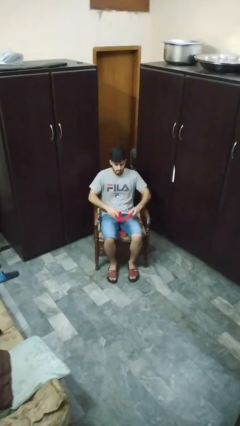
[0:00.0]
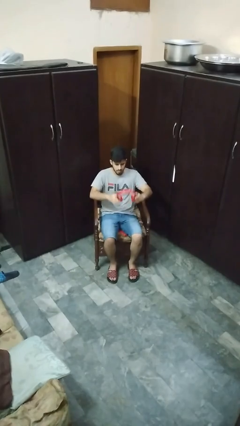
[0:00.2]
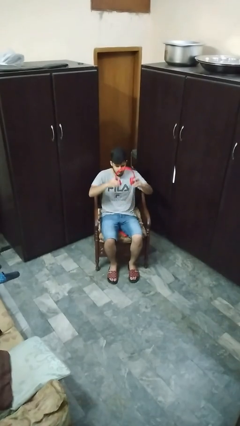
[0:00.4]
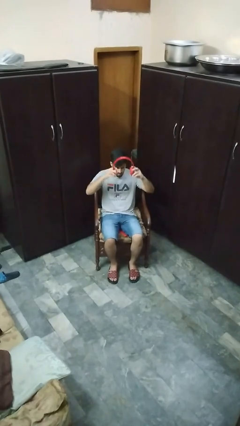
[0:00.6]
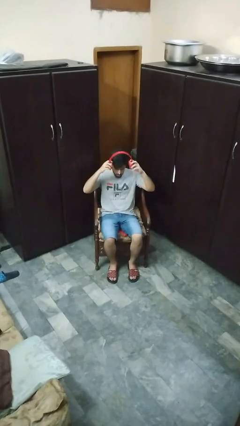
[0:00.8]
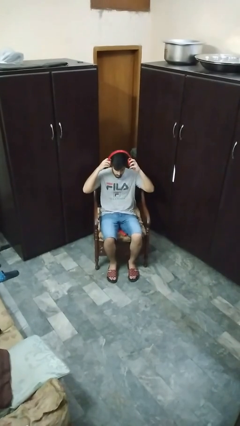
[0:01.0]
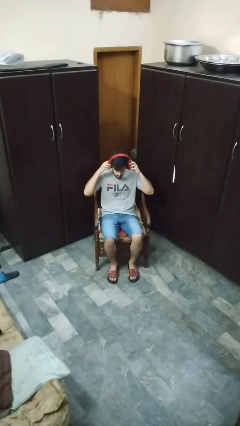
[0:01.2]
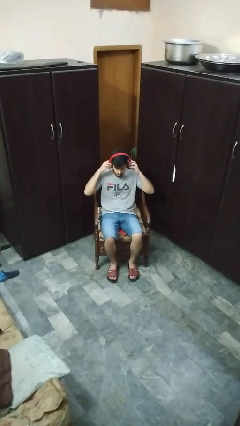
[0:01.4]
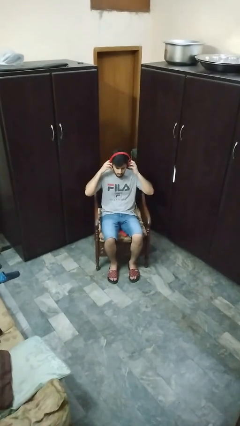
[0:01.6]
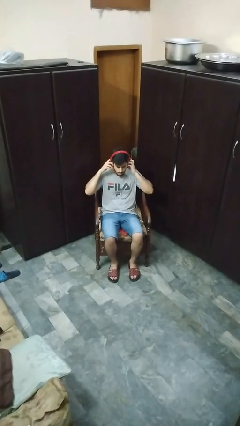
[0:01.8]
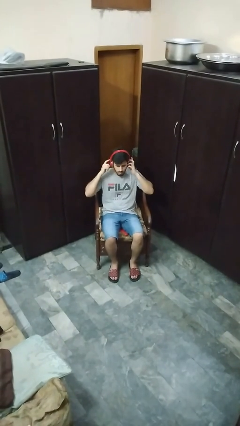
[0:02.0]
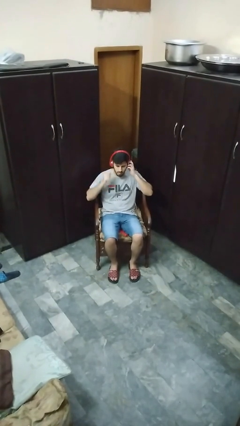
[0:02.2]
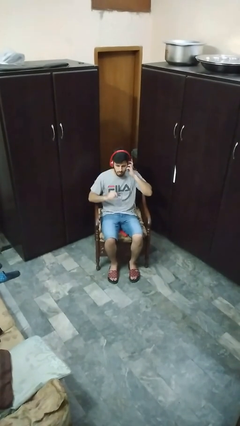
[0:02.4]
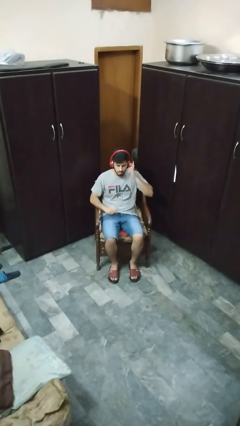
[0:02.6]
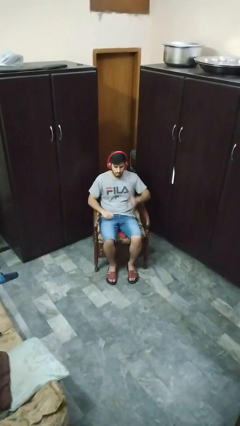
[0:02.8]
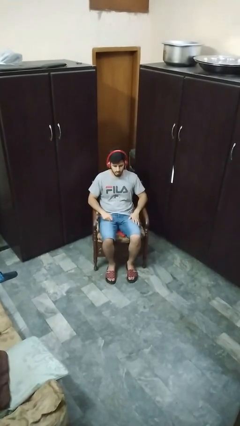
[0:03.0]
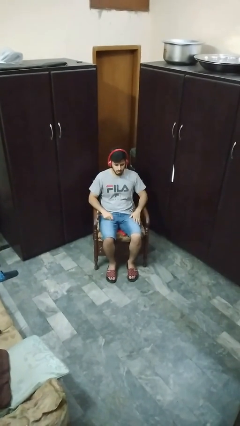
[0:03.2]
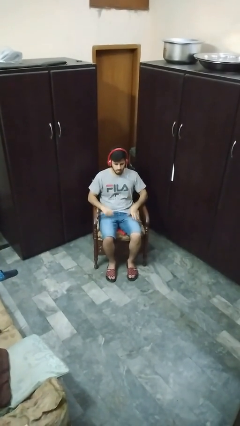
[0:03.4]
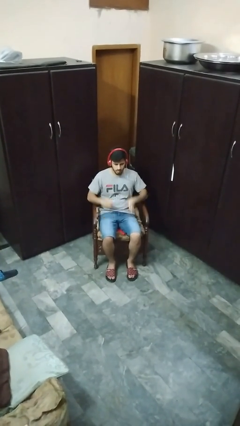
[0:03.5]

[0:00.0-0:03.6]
person puts on headphones

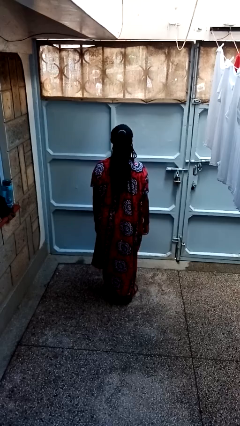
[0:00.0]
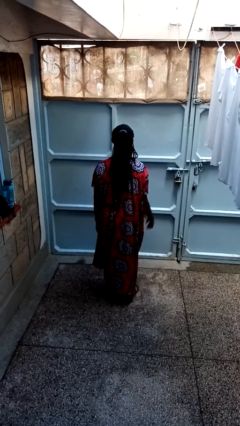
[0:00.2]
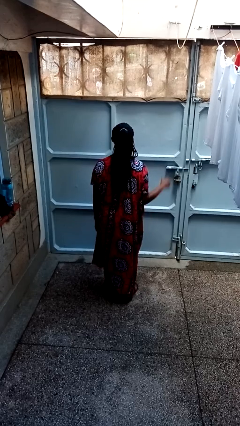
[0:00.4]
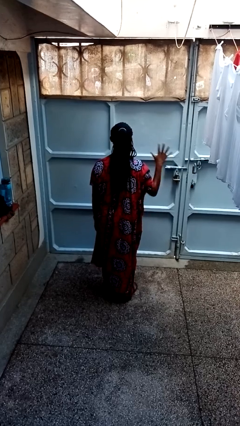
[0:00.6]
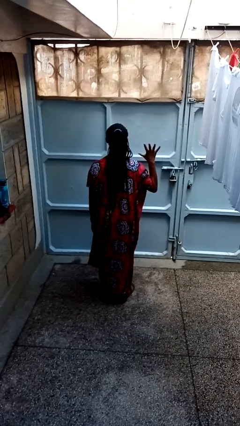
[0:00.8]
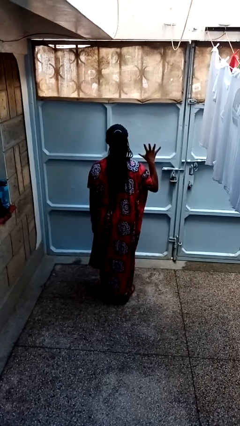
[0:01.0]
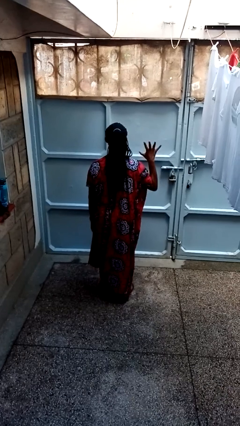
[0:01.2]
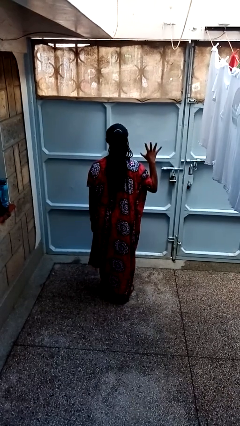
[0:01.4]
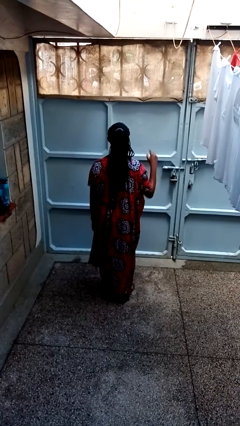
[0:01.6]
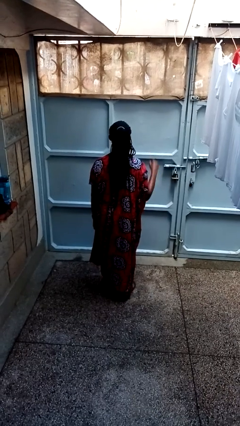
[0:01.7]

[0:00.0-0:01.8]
person gestures number five

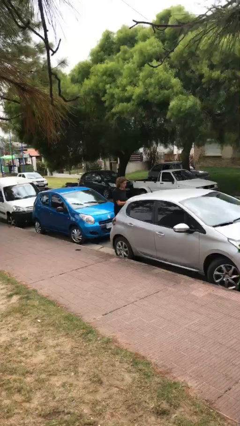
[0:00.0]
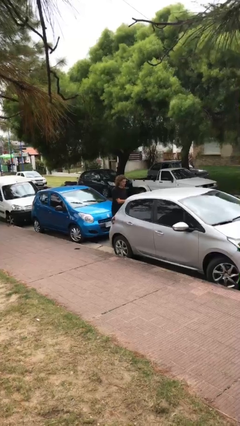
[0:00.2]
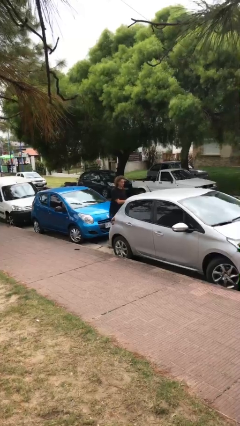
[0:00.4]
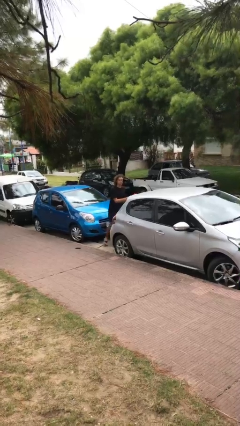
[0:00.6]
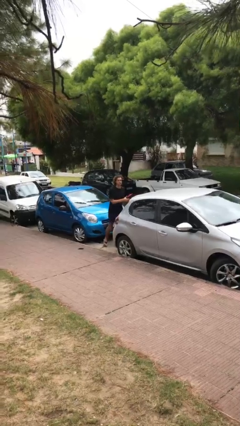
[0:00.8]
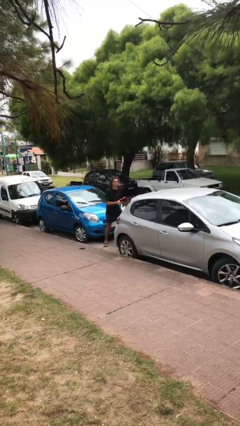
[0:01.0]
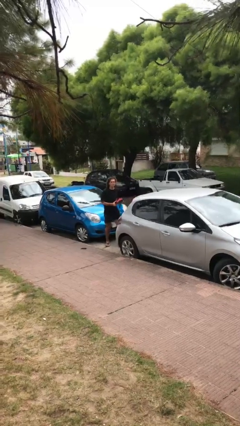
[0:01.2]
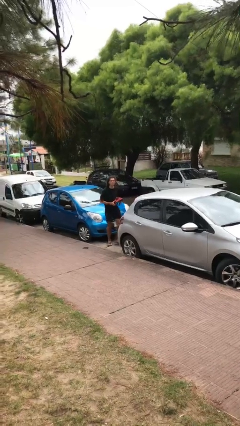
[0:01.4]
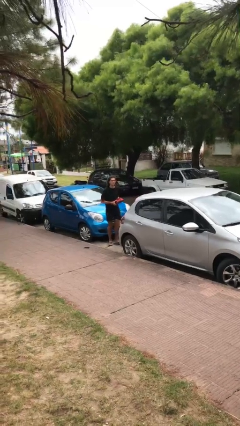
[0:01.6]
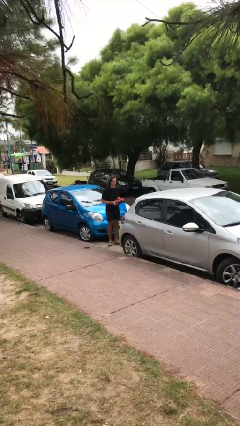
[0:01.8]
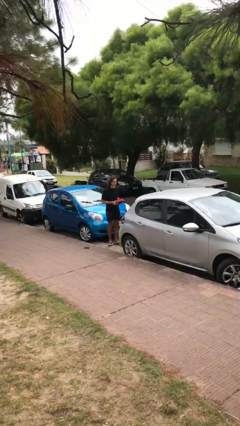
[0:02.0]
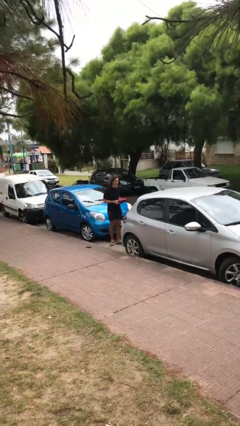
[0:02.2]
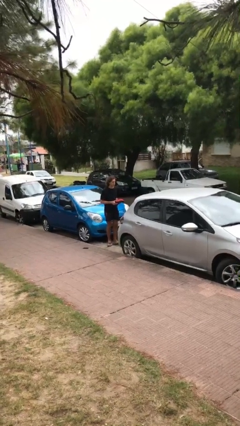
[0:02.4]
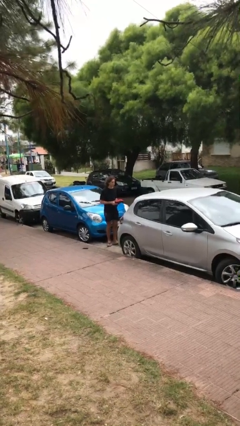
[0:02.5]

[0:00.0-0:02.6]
person unloads car

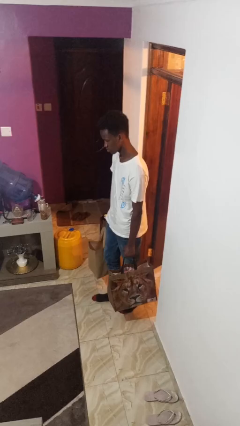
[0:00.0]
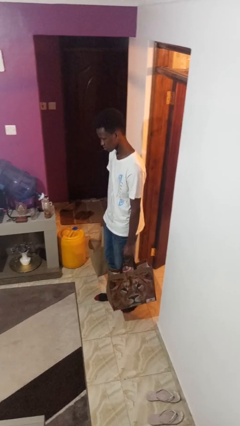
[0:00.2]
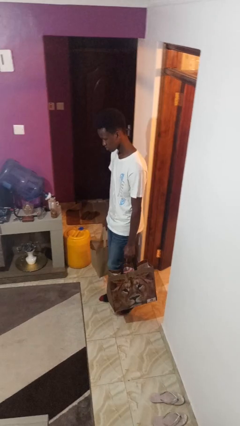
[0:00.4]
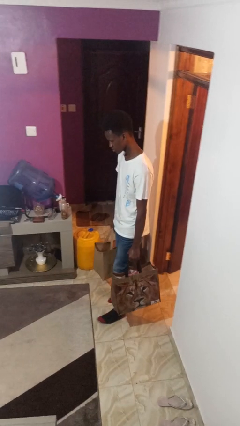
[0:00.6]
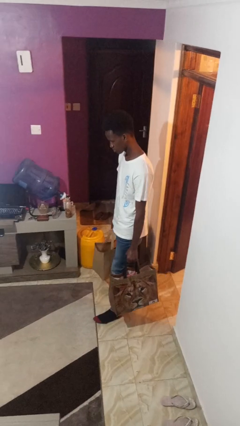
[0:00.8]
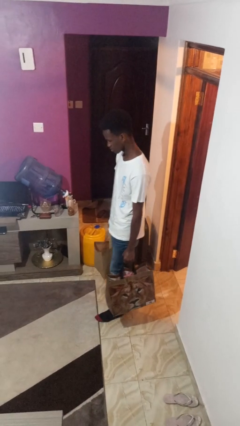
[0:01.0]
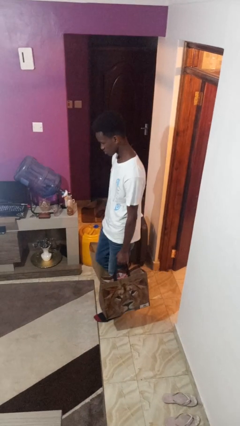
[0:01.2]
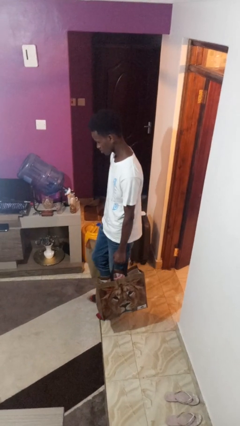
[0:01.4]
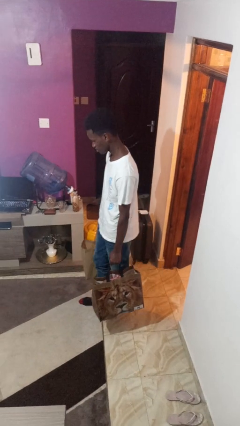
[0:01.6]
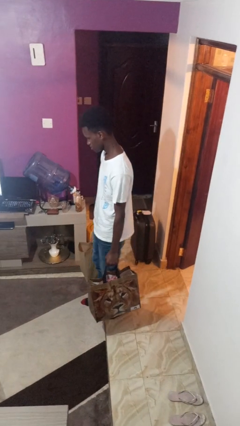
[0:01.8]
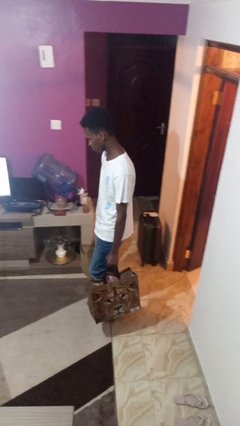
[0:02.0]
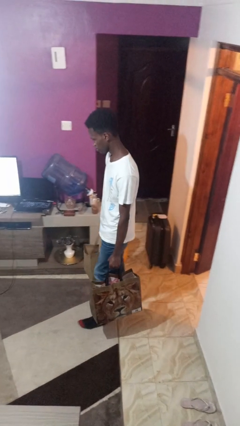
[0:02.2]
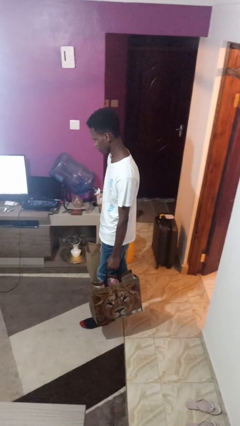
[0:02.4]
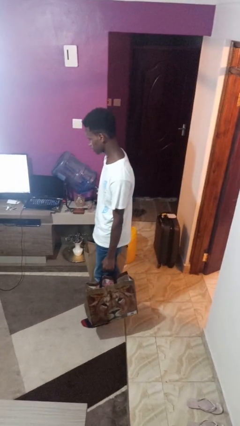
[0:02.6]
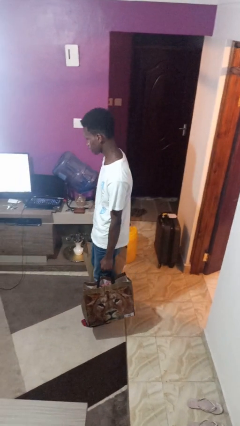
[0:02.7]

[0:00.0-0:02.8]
person carries groceries

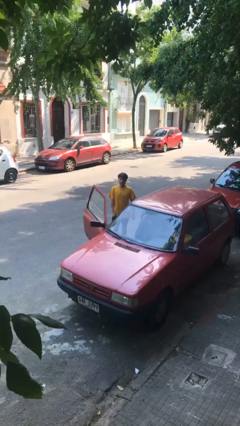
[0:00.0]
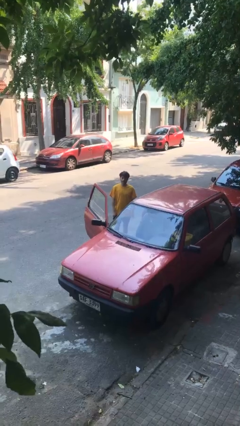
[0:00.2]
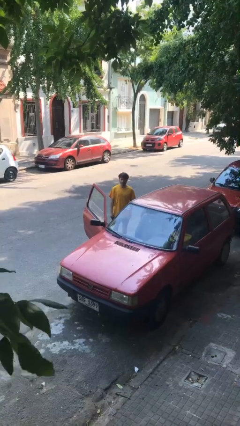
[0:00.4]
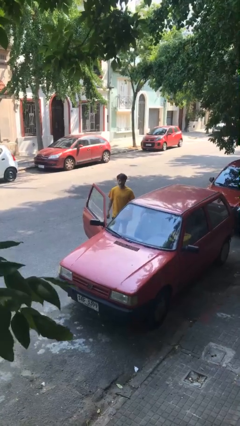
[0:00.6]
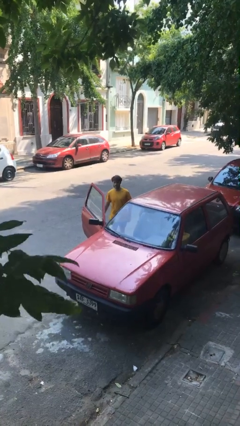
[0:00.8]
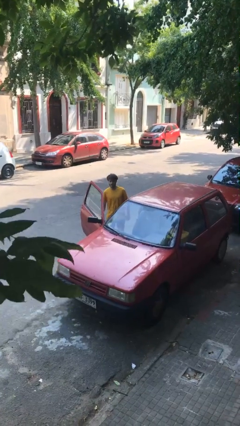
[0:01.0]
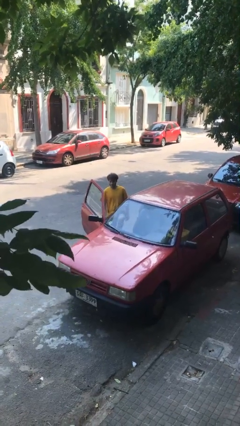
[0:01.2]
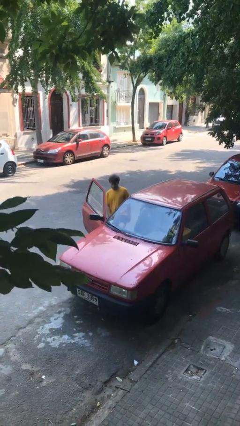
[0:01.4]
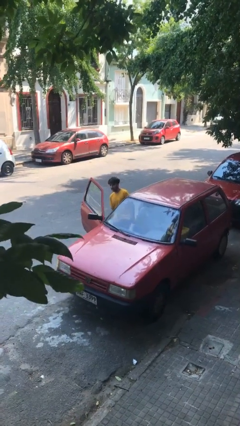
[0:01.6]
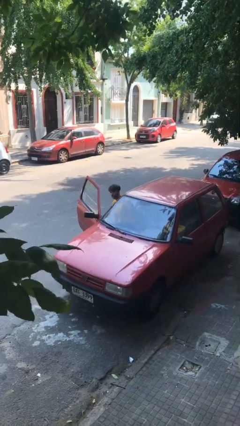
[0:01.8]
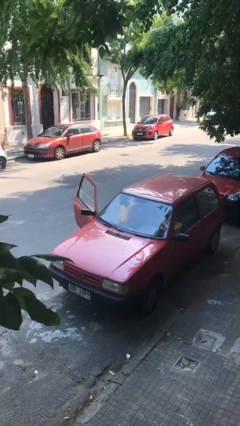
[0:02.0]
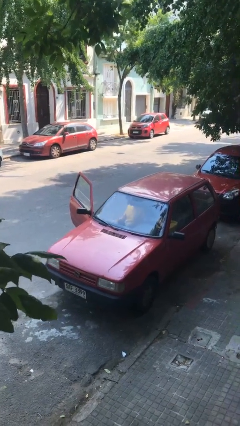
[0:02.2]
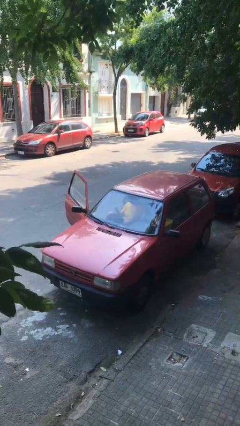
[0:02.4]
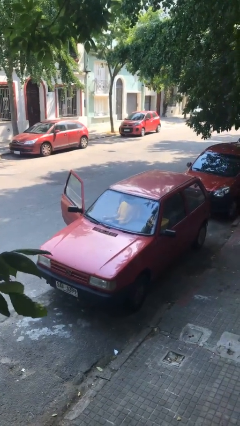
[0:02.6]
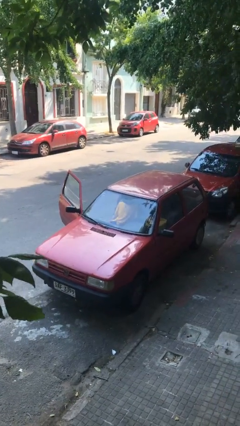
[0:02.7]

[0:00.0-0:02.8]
person enters car

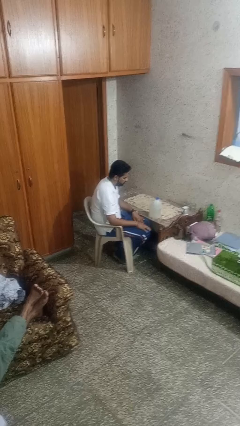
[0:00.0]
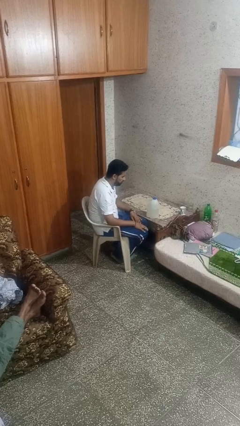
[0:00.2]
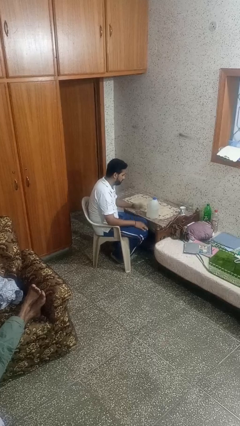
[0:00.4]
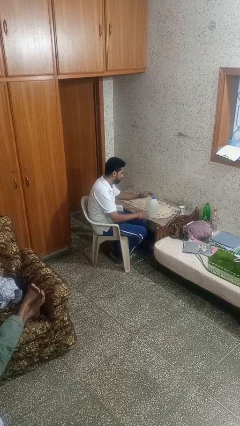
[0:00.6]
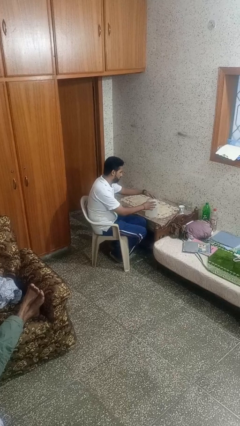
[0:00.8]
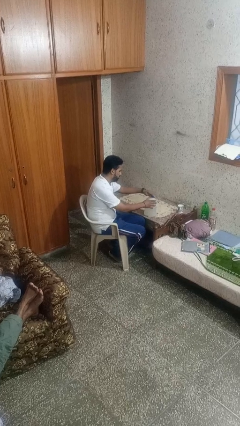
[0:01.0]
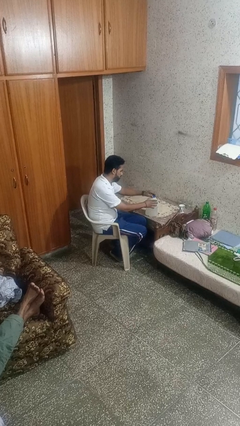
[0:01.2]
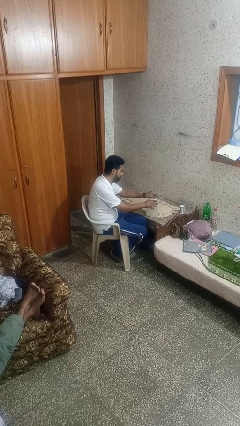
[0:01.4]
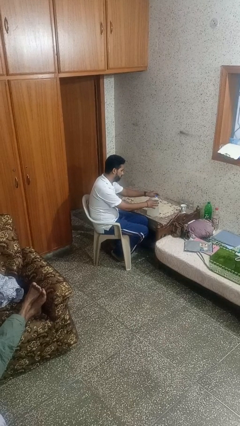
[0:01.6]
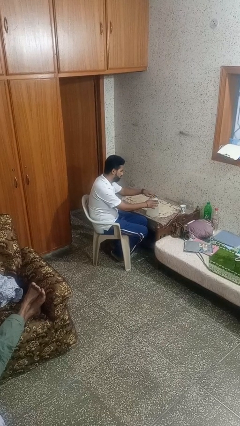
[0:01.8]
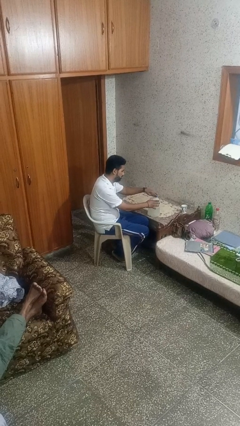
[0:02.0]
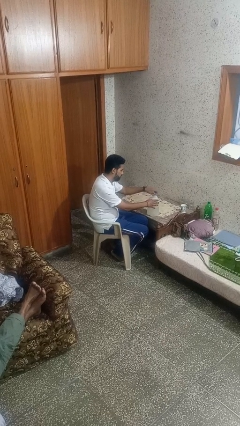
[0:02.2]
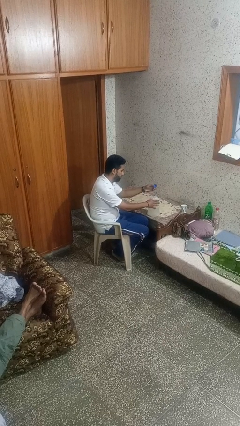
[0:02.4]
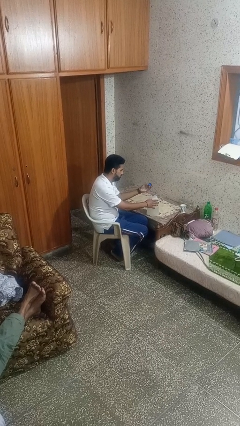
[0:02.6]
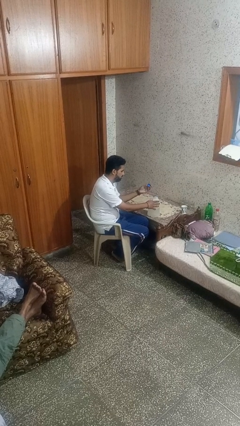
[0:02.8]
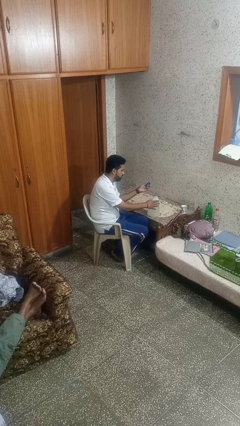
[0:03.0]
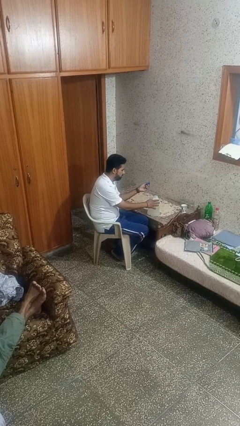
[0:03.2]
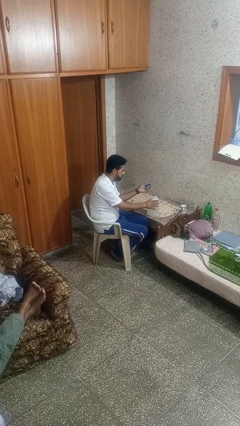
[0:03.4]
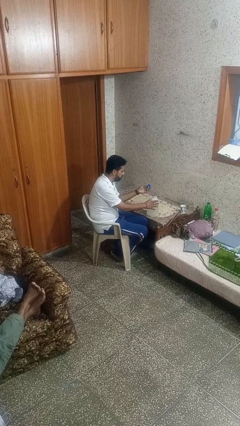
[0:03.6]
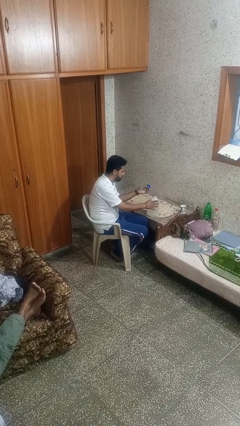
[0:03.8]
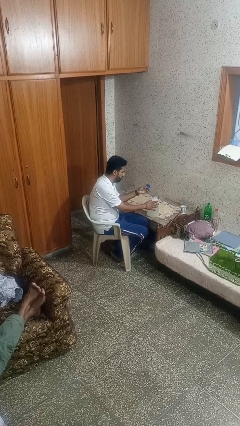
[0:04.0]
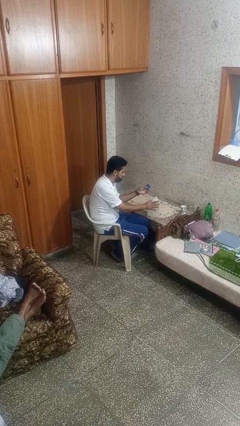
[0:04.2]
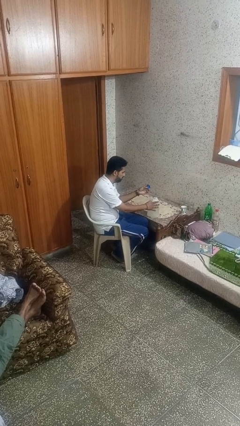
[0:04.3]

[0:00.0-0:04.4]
person unscrews lid from bottle
